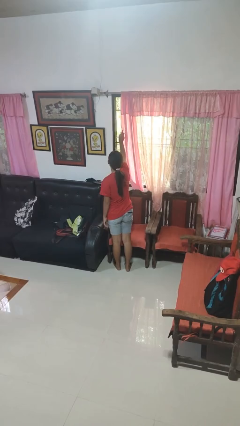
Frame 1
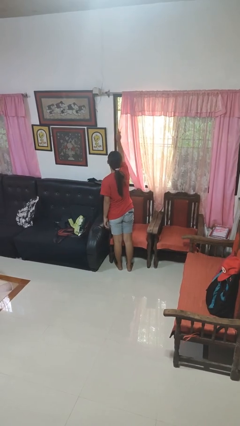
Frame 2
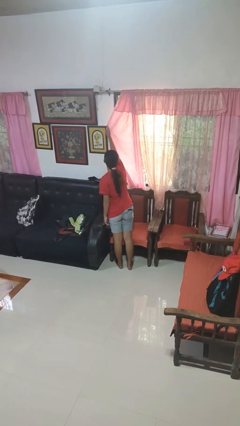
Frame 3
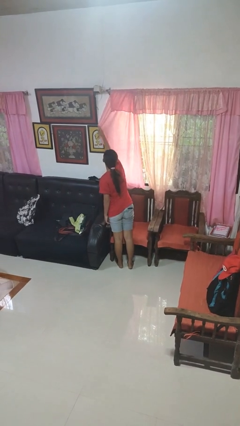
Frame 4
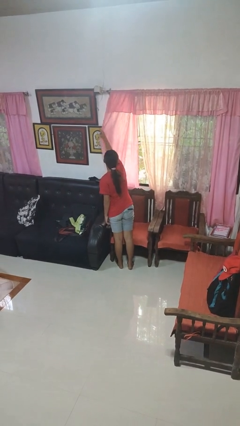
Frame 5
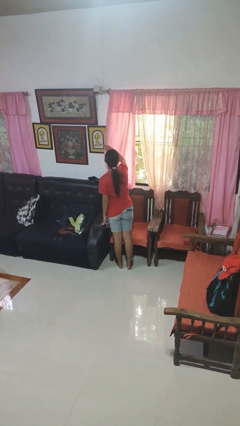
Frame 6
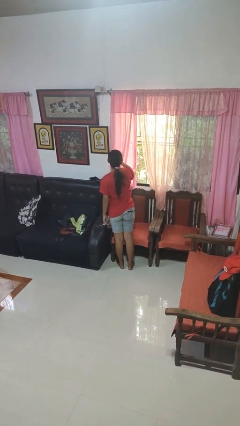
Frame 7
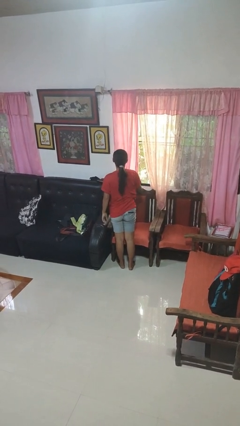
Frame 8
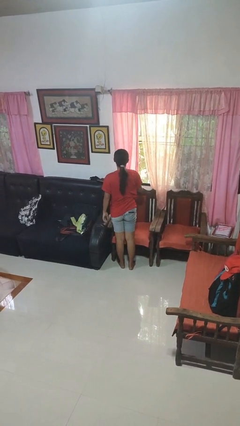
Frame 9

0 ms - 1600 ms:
person closes curtains

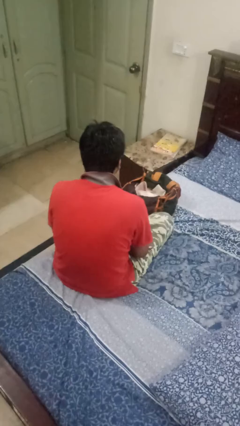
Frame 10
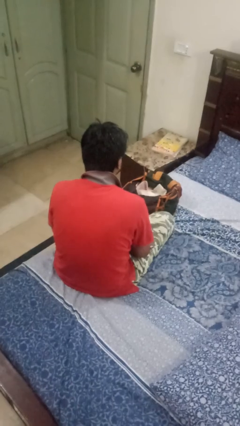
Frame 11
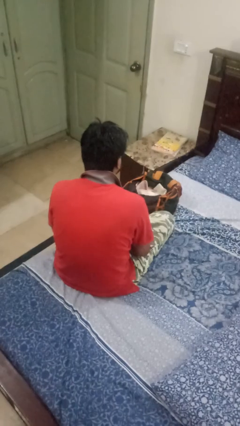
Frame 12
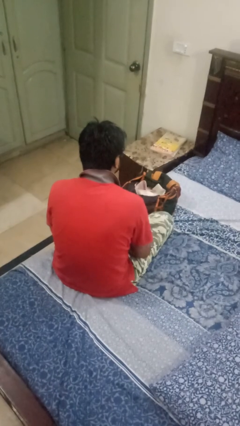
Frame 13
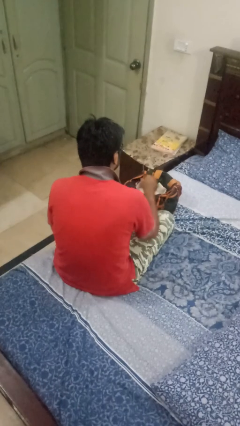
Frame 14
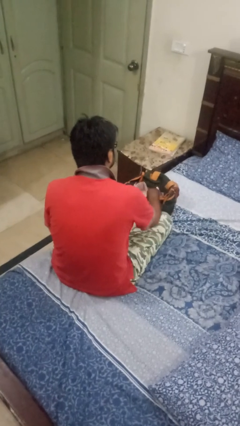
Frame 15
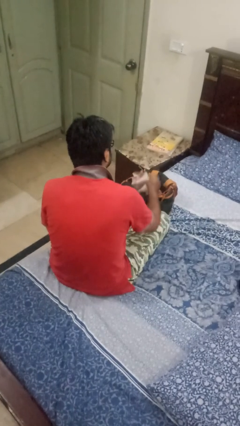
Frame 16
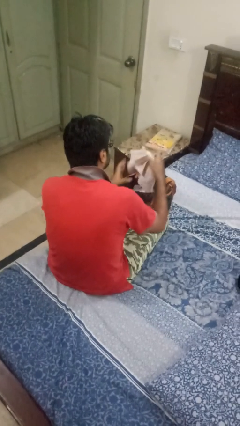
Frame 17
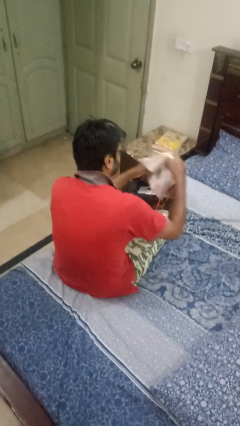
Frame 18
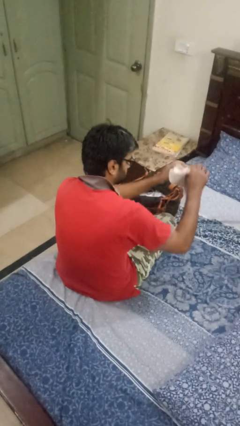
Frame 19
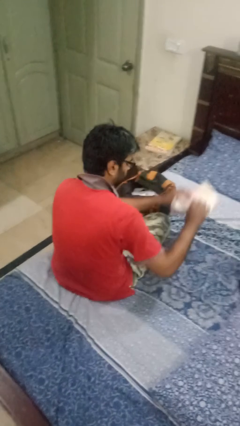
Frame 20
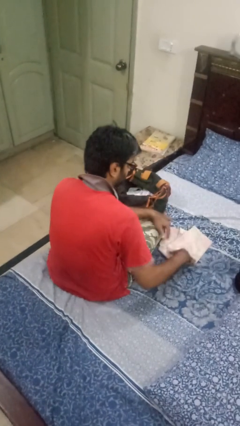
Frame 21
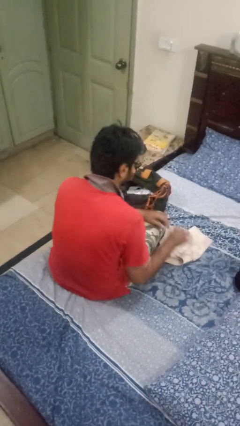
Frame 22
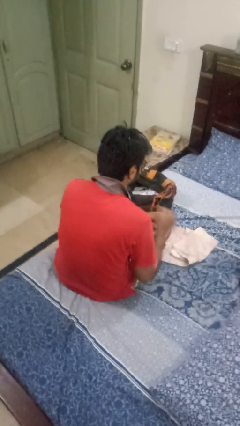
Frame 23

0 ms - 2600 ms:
person takes object from bag

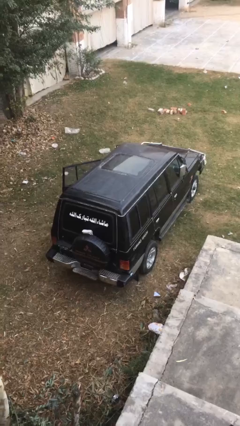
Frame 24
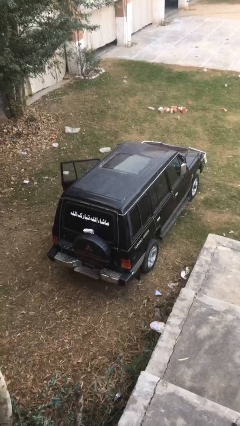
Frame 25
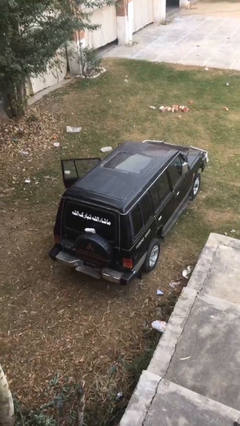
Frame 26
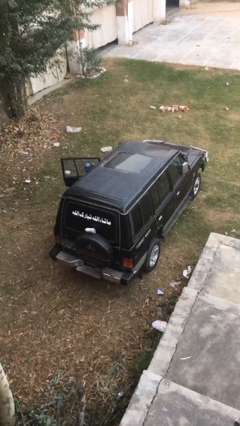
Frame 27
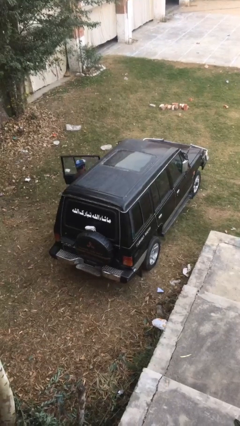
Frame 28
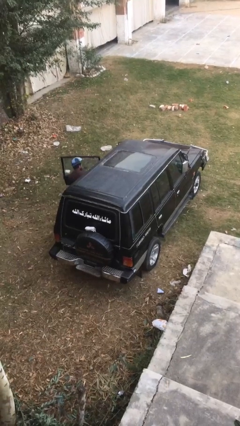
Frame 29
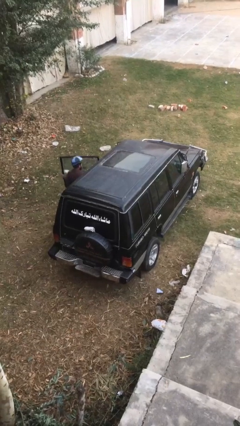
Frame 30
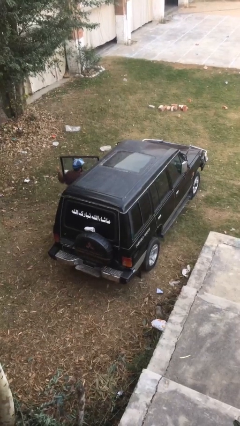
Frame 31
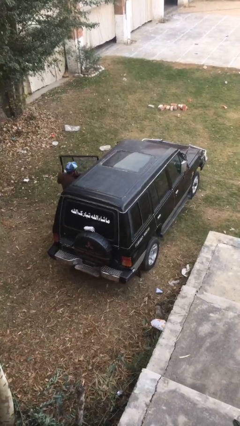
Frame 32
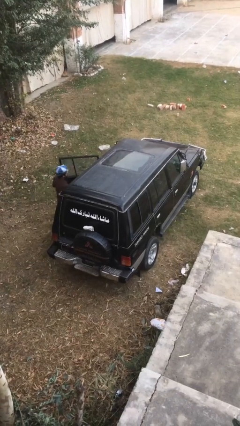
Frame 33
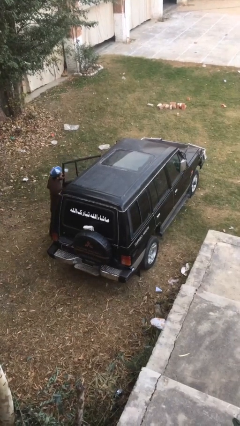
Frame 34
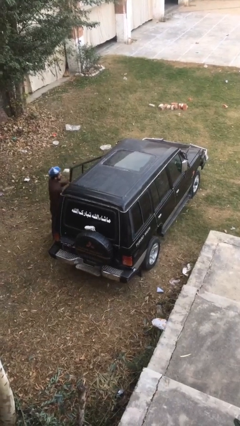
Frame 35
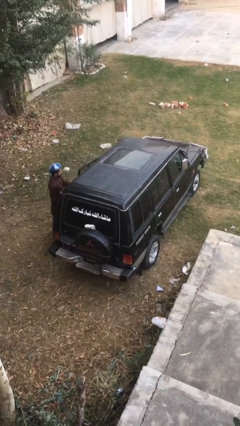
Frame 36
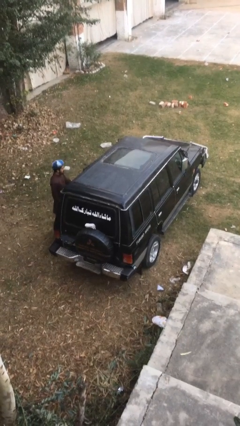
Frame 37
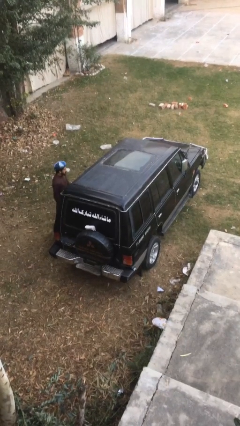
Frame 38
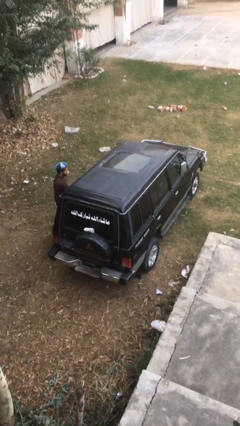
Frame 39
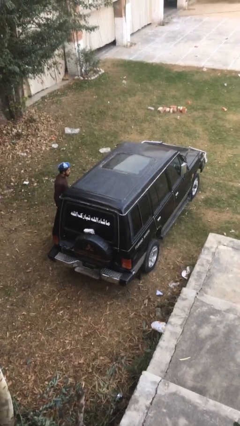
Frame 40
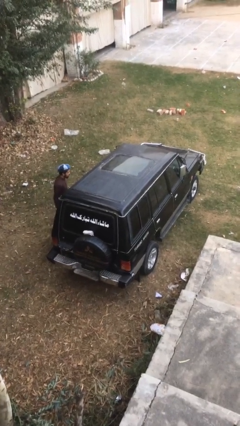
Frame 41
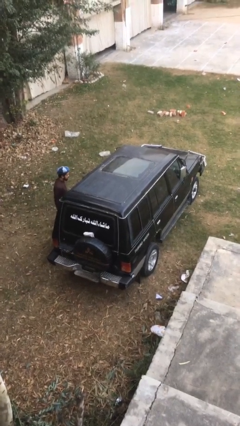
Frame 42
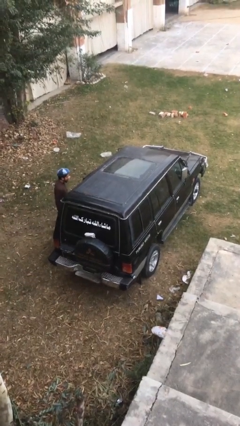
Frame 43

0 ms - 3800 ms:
car drops off person

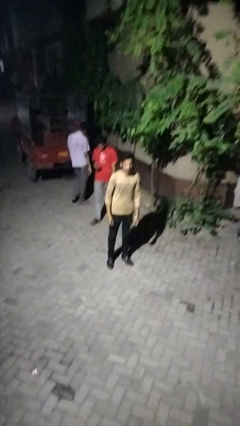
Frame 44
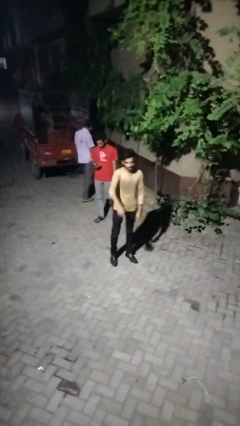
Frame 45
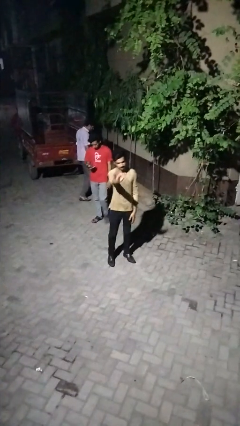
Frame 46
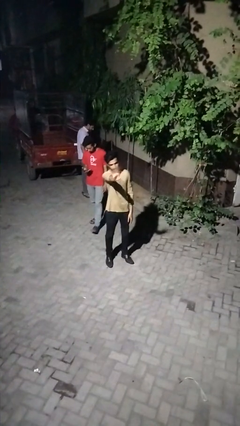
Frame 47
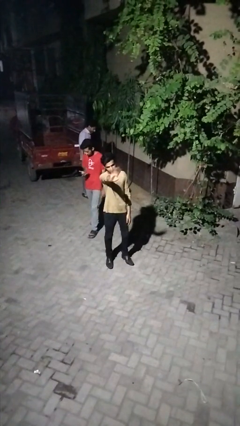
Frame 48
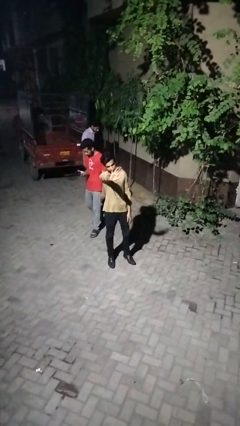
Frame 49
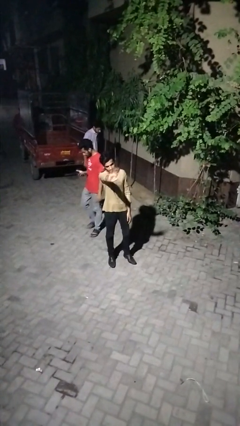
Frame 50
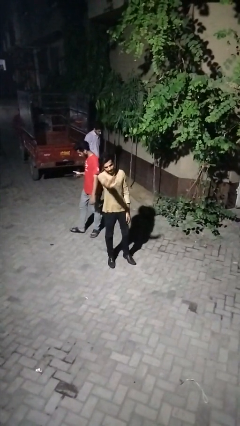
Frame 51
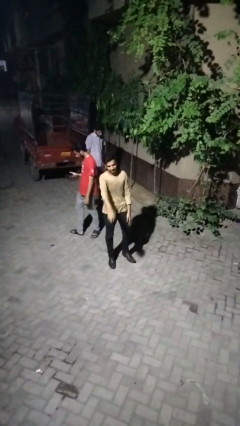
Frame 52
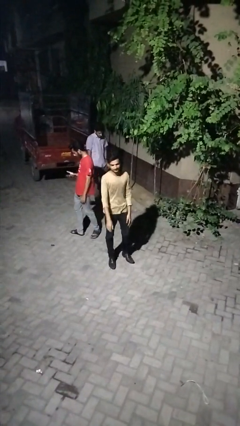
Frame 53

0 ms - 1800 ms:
person waves at person

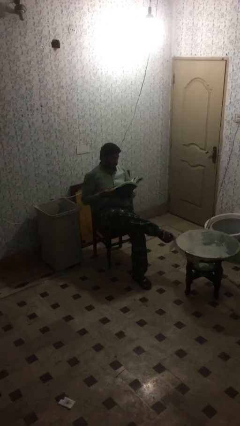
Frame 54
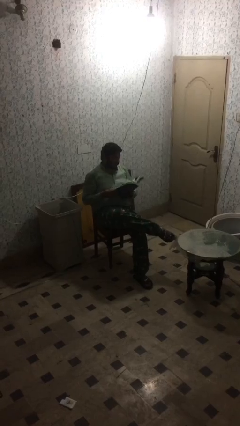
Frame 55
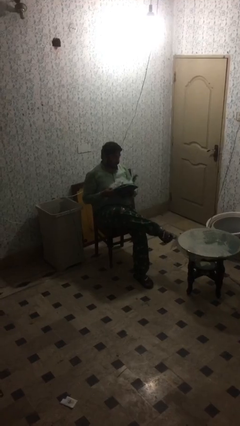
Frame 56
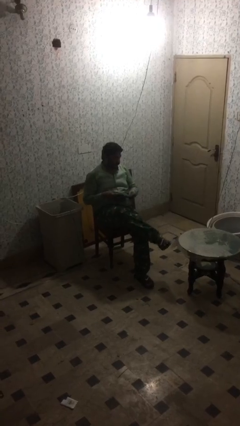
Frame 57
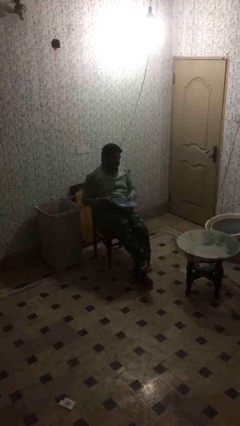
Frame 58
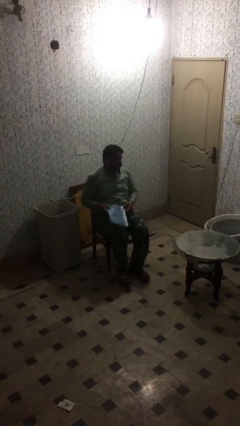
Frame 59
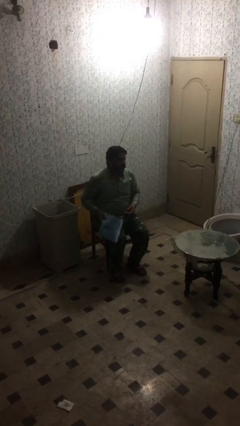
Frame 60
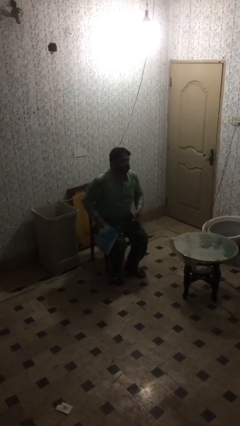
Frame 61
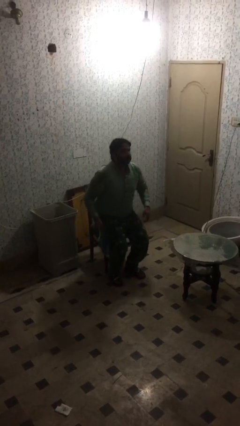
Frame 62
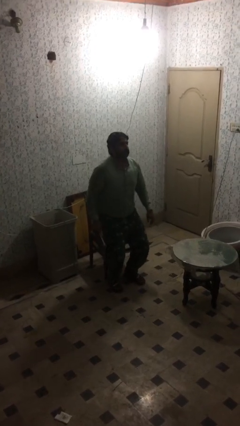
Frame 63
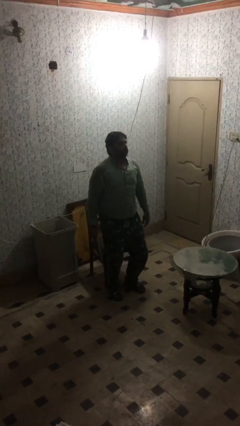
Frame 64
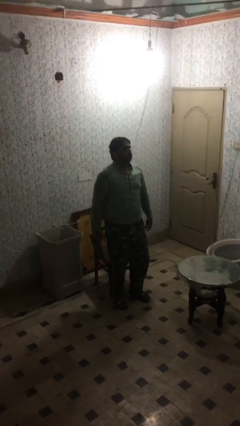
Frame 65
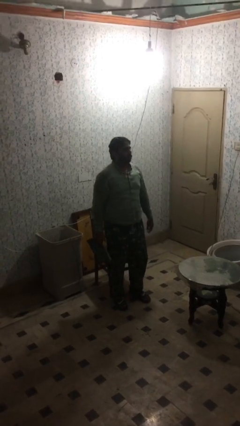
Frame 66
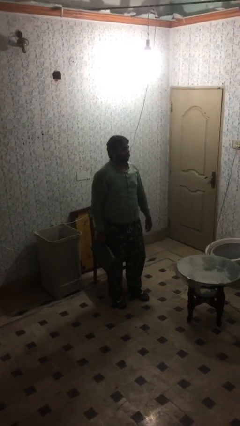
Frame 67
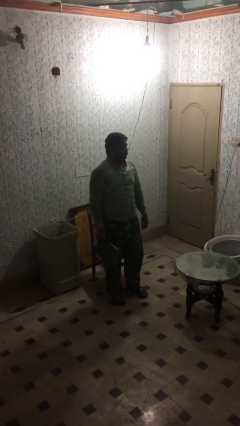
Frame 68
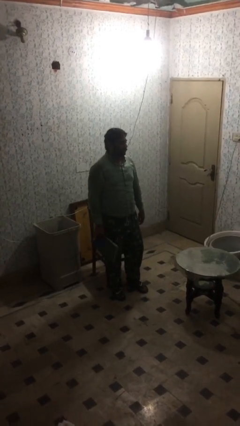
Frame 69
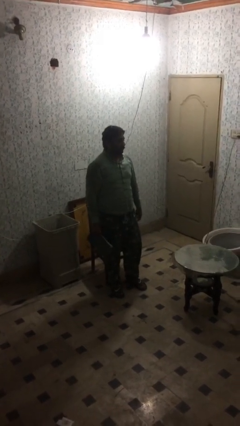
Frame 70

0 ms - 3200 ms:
person stands up

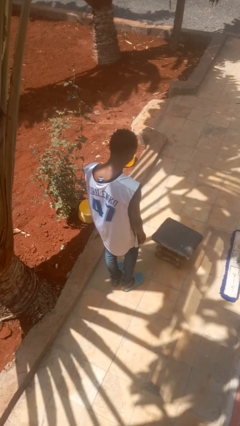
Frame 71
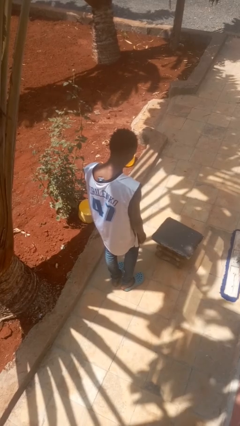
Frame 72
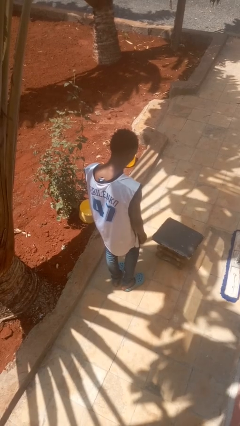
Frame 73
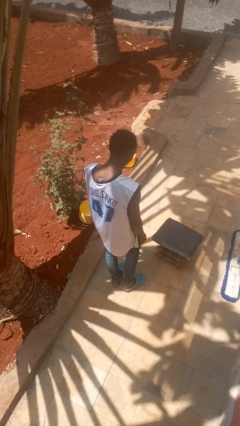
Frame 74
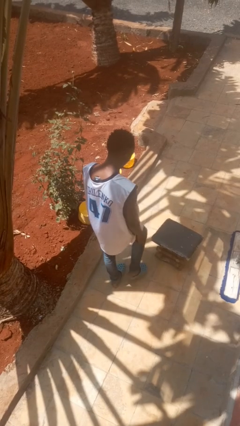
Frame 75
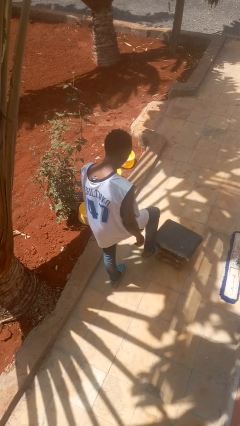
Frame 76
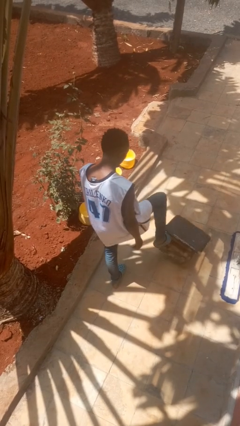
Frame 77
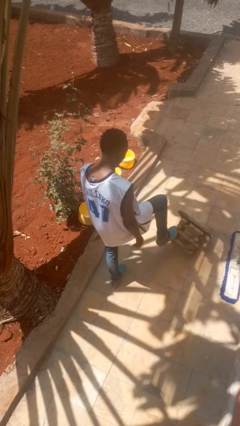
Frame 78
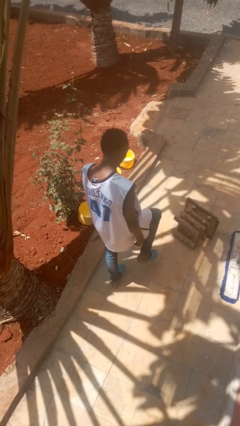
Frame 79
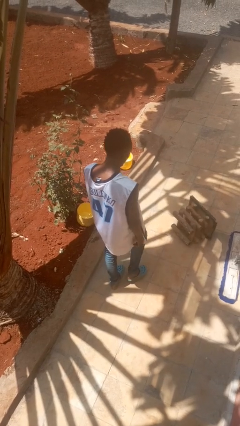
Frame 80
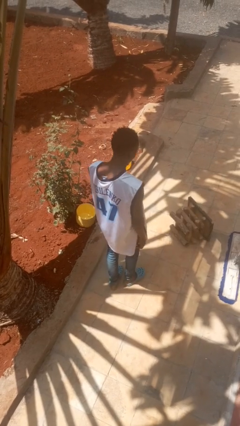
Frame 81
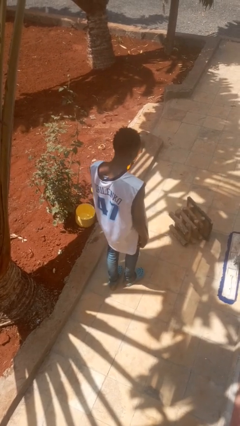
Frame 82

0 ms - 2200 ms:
person knocks over furniture

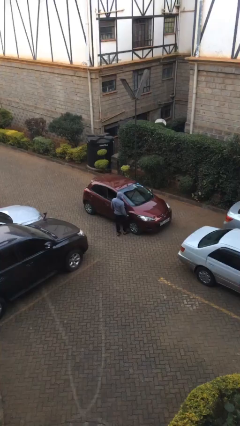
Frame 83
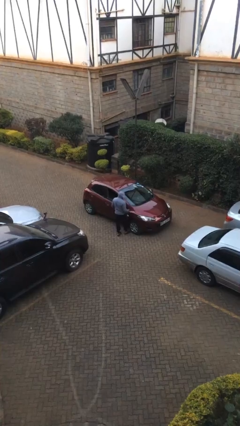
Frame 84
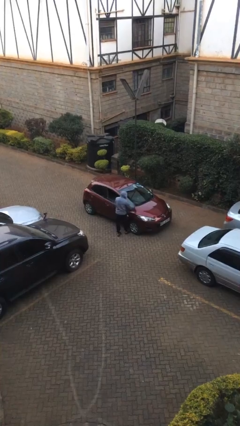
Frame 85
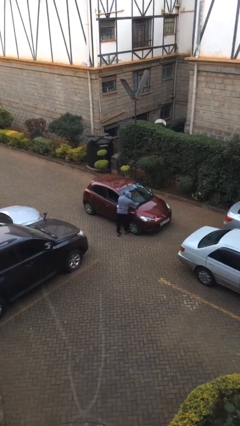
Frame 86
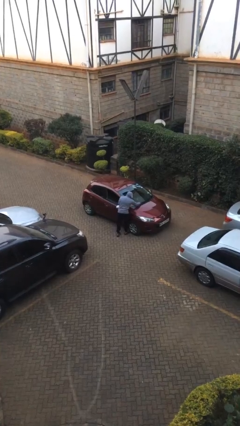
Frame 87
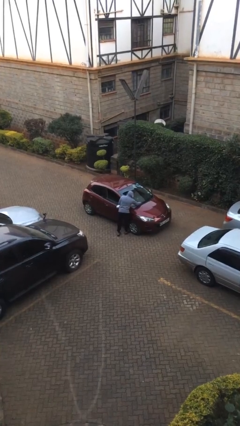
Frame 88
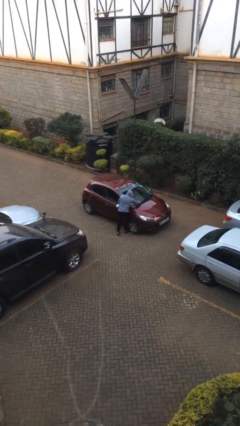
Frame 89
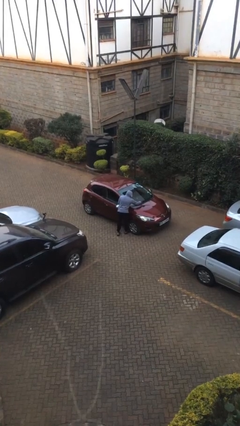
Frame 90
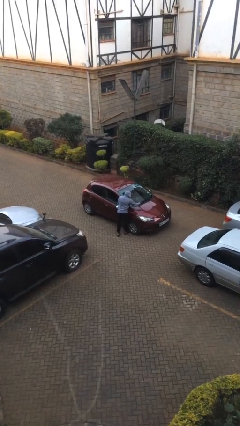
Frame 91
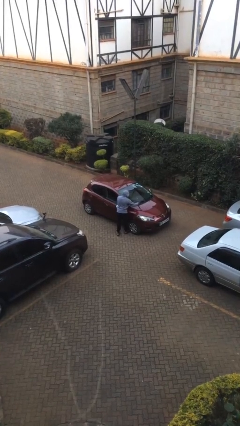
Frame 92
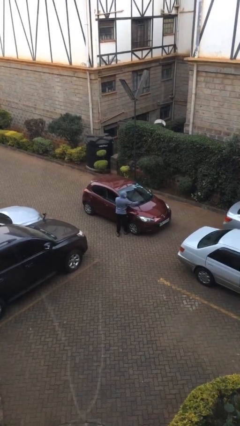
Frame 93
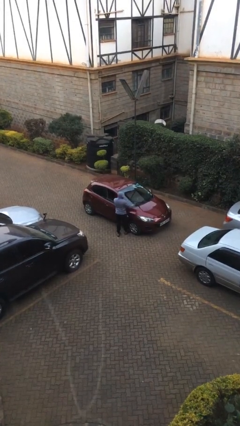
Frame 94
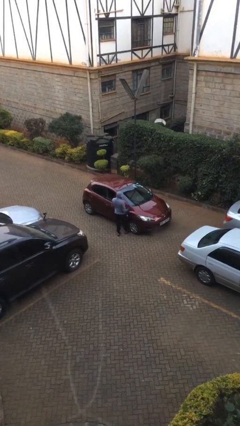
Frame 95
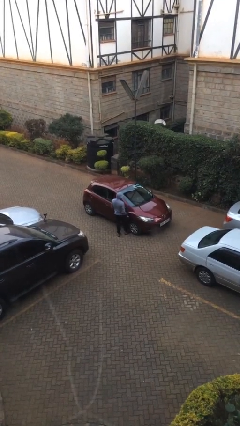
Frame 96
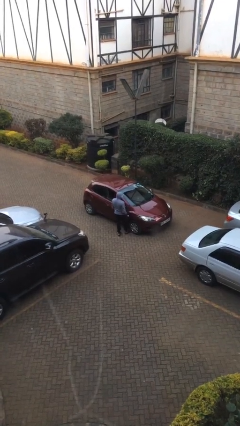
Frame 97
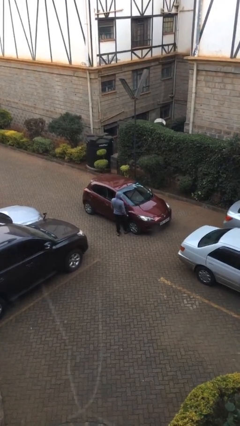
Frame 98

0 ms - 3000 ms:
person flips up car wipers
